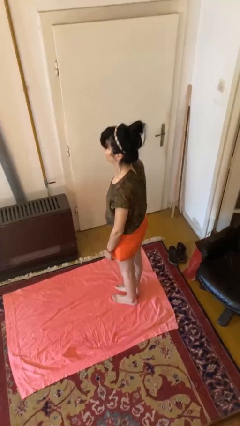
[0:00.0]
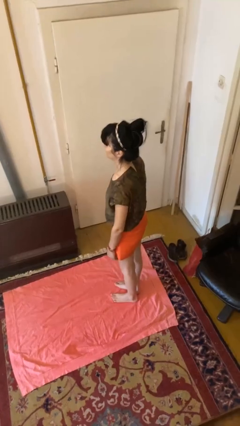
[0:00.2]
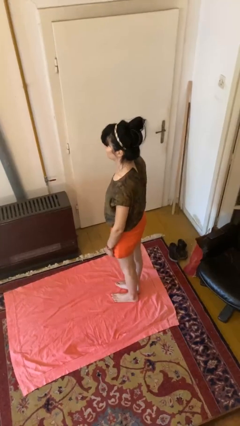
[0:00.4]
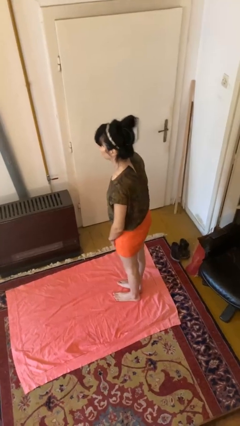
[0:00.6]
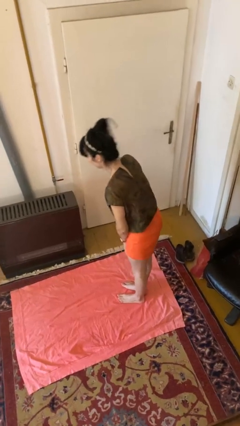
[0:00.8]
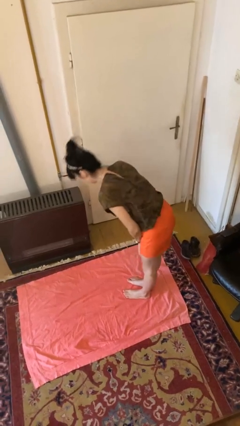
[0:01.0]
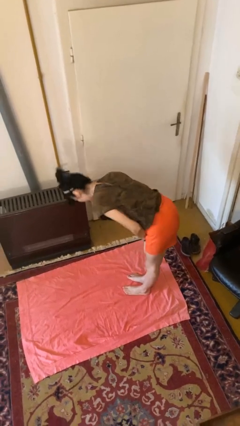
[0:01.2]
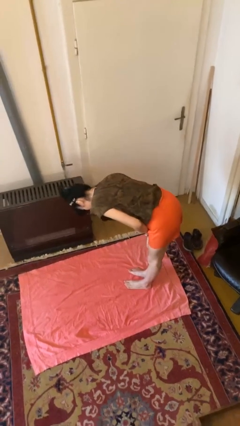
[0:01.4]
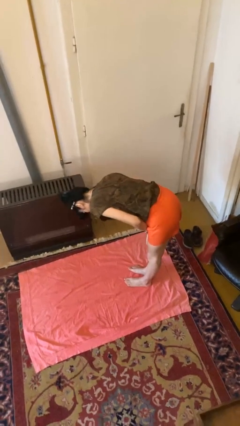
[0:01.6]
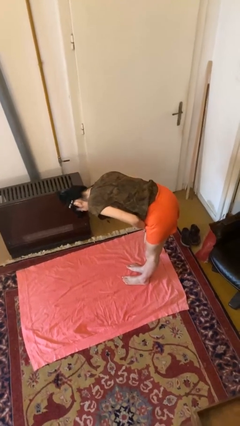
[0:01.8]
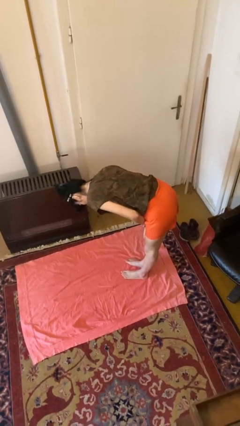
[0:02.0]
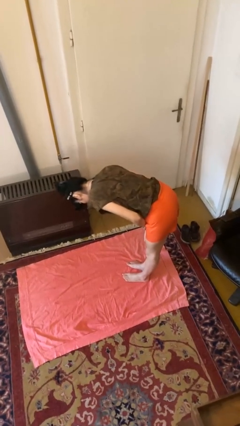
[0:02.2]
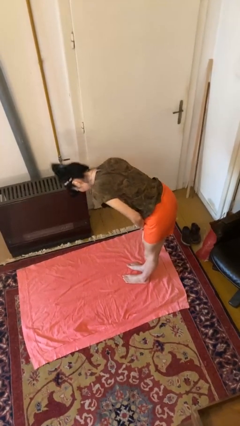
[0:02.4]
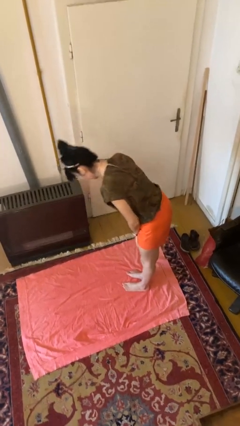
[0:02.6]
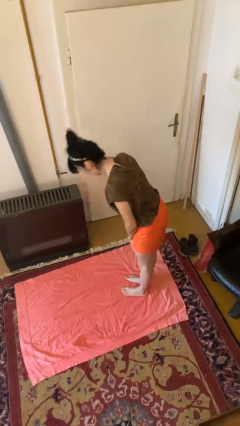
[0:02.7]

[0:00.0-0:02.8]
person bows

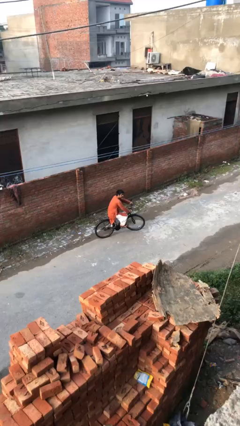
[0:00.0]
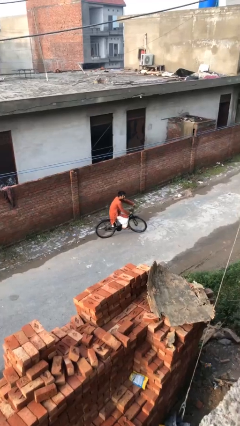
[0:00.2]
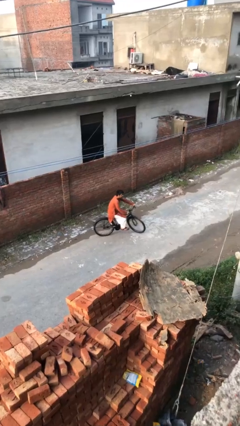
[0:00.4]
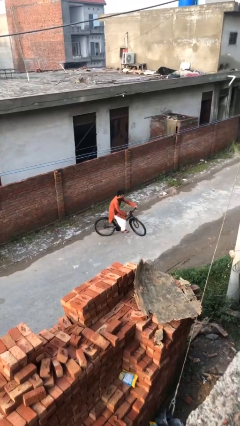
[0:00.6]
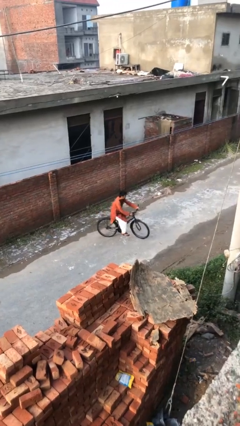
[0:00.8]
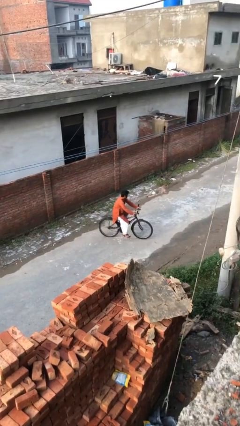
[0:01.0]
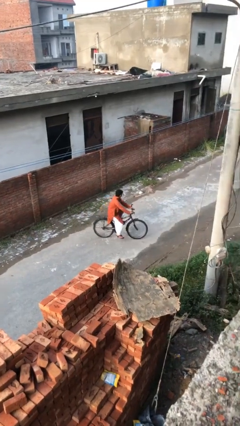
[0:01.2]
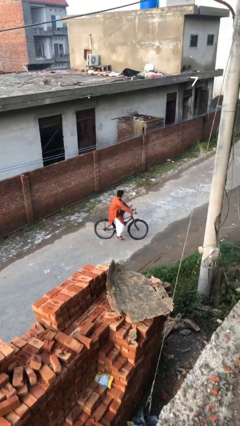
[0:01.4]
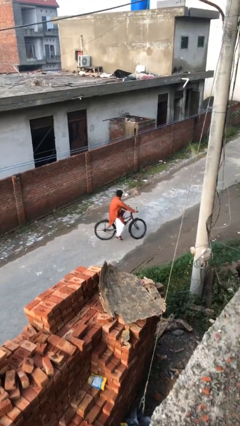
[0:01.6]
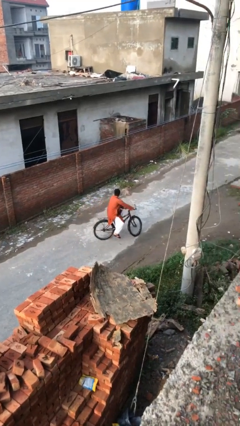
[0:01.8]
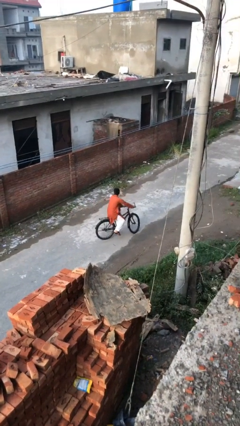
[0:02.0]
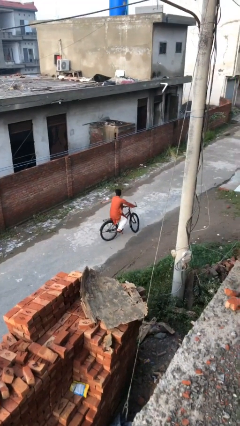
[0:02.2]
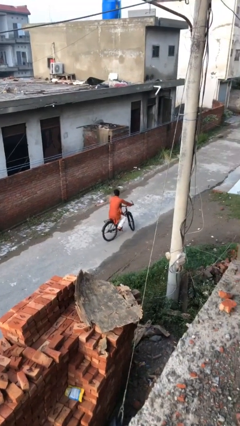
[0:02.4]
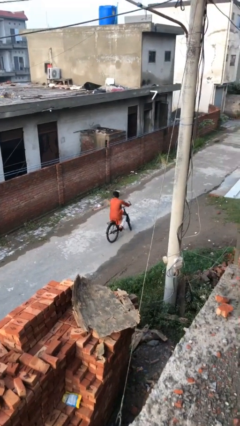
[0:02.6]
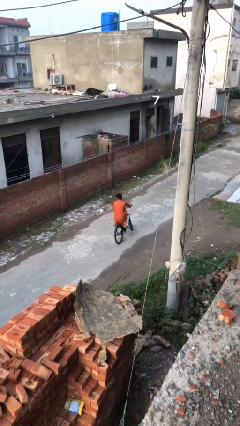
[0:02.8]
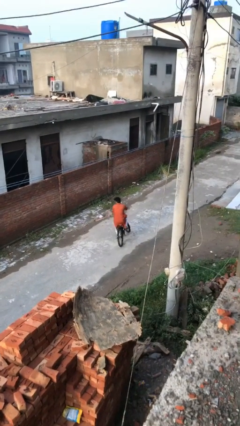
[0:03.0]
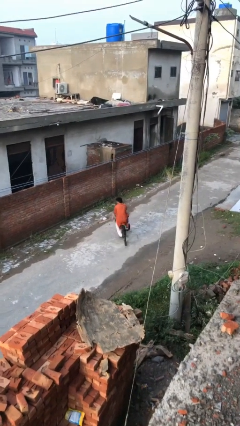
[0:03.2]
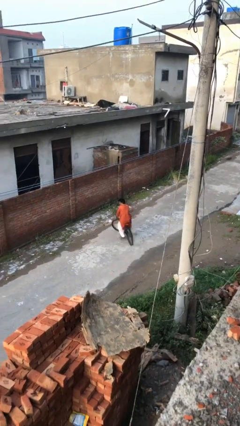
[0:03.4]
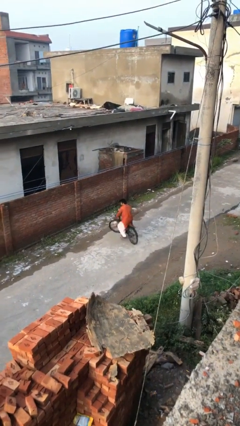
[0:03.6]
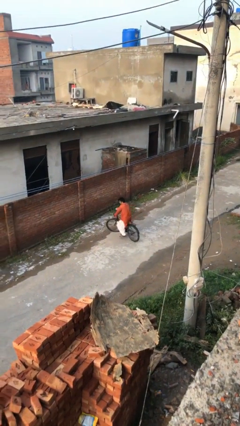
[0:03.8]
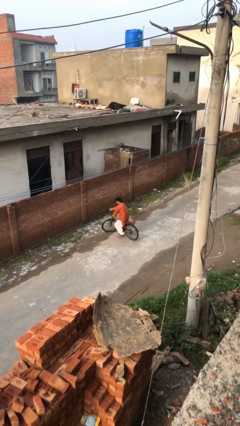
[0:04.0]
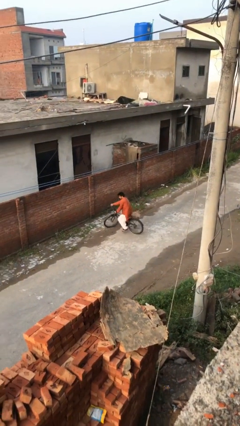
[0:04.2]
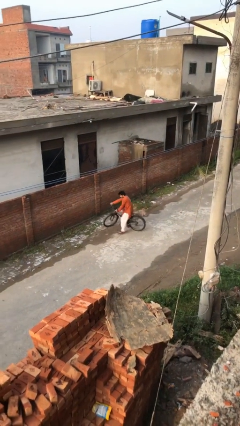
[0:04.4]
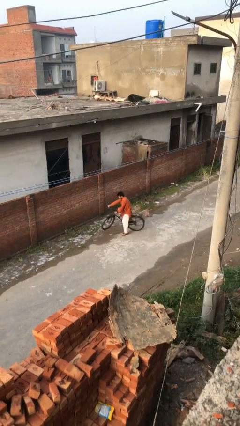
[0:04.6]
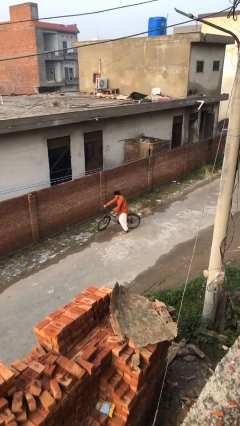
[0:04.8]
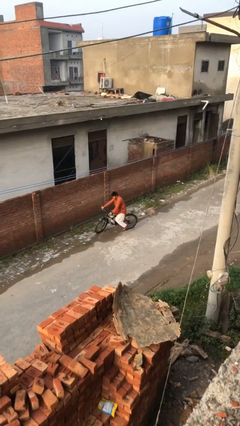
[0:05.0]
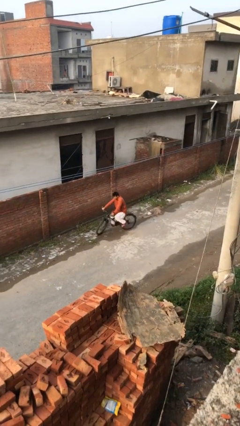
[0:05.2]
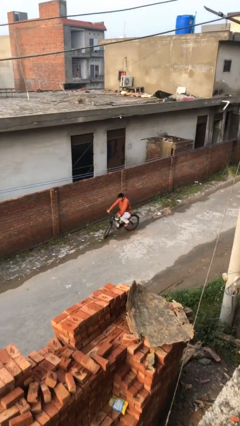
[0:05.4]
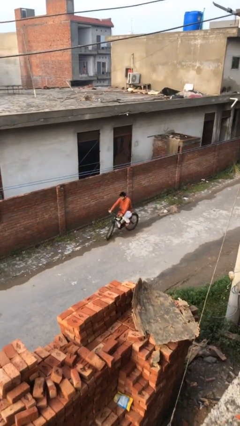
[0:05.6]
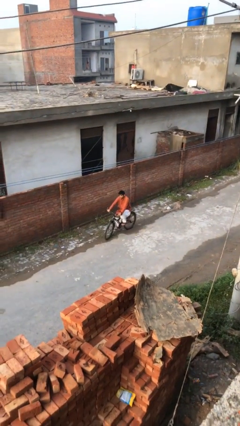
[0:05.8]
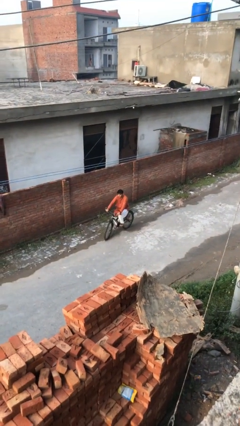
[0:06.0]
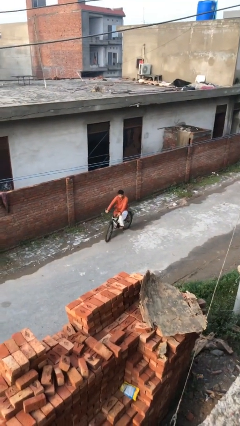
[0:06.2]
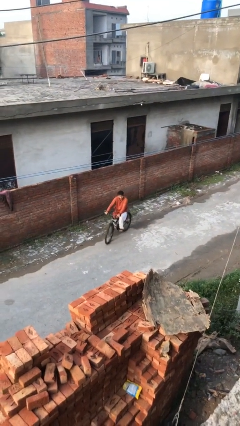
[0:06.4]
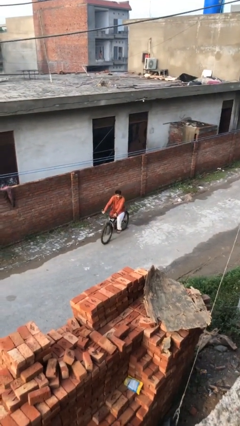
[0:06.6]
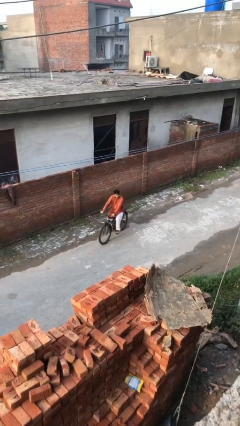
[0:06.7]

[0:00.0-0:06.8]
person rides bicycle

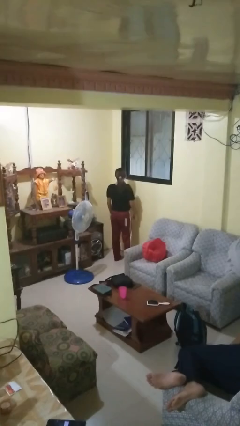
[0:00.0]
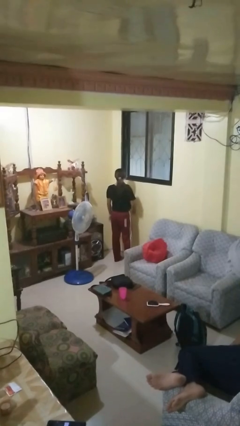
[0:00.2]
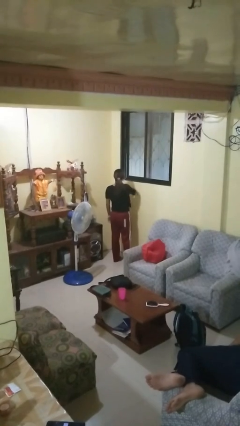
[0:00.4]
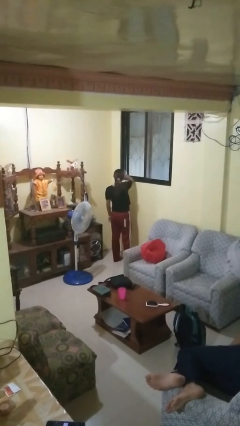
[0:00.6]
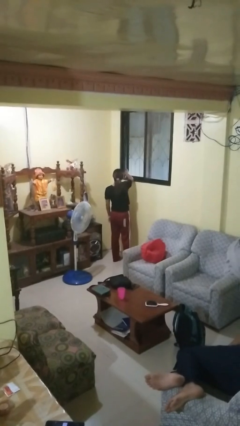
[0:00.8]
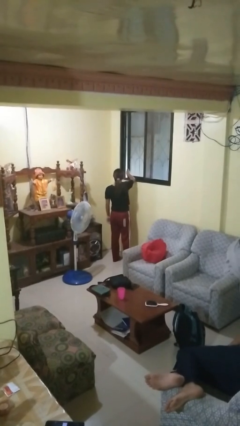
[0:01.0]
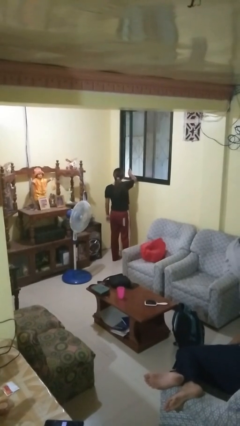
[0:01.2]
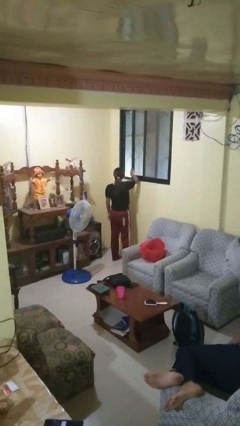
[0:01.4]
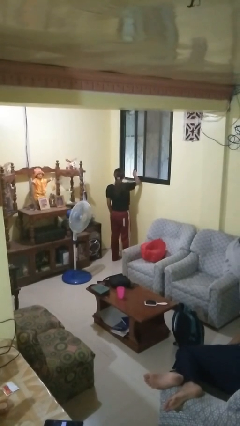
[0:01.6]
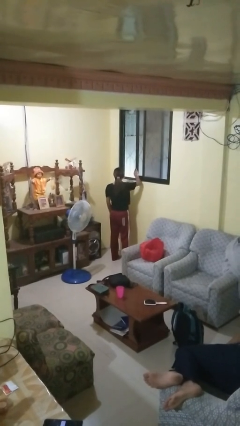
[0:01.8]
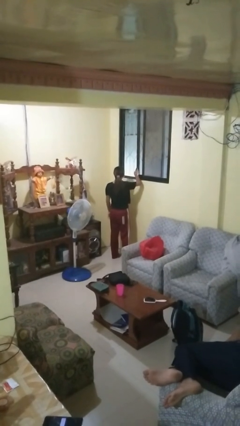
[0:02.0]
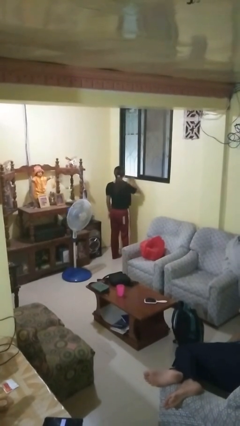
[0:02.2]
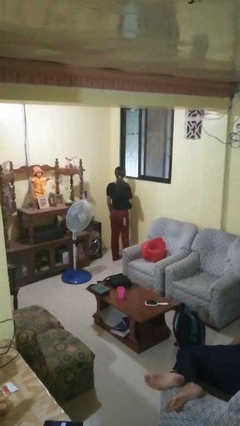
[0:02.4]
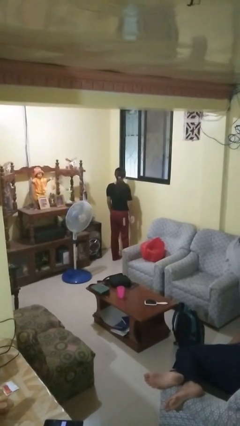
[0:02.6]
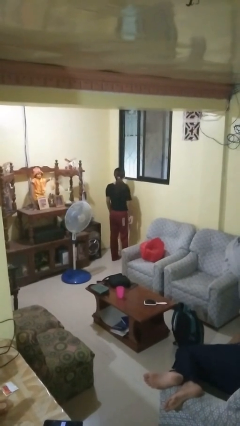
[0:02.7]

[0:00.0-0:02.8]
person opens home window

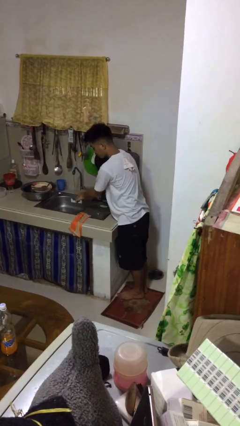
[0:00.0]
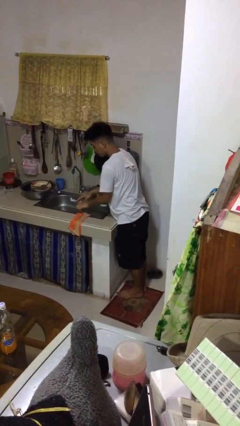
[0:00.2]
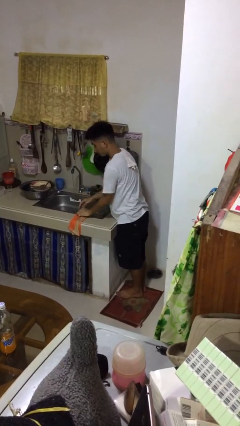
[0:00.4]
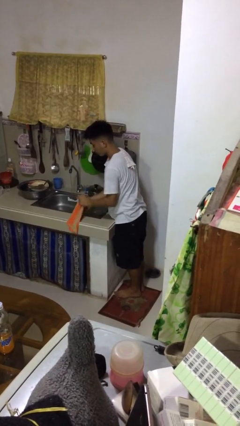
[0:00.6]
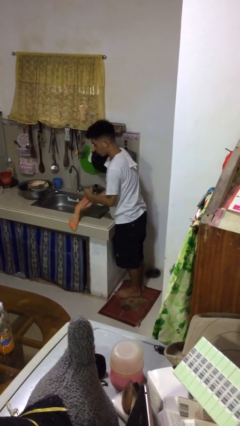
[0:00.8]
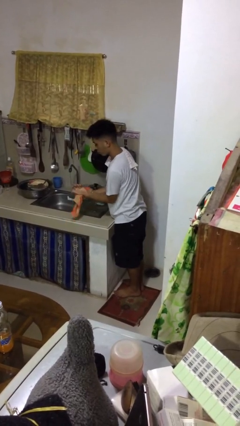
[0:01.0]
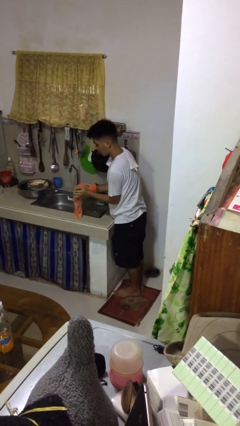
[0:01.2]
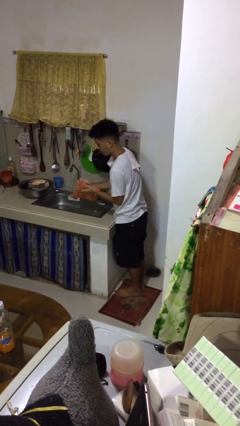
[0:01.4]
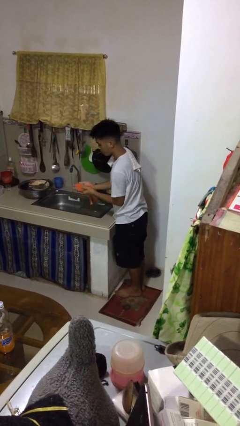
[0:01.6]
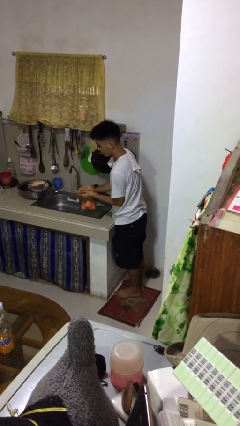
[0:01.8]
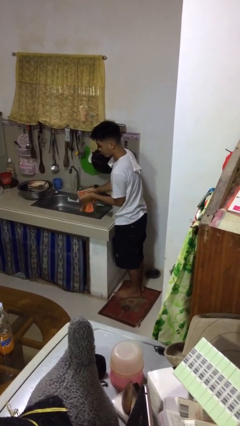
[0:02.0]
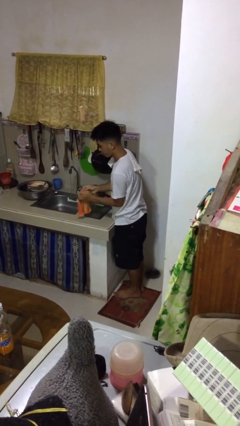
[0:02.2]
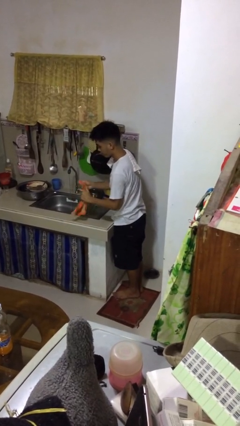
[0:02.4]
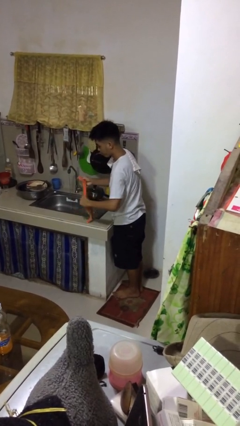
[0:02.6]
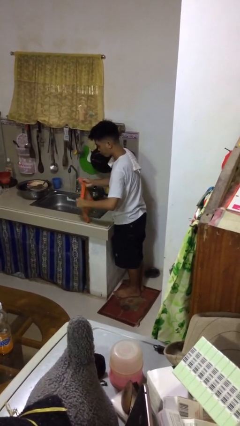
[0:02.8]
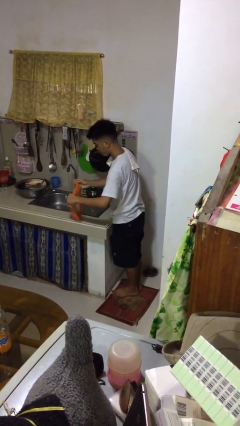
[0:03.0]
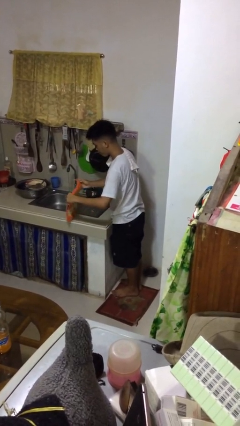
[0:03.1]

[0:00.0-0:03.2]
person dries hands with towel

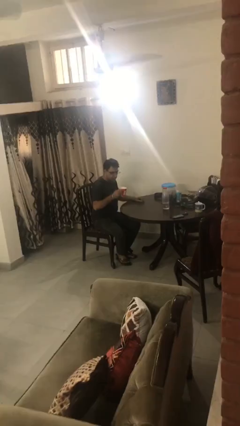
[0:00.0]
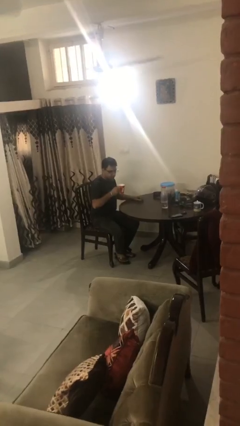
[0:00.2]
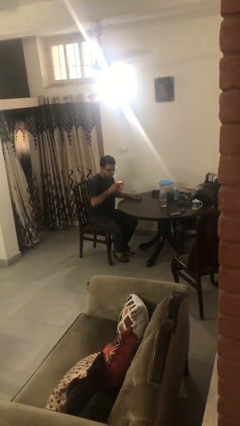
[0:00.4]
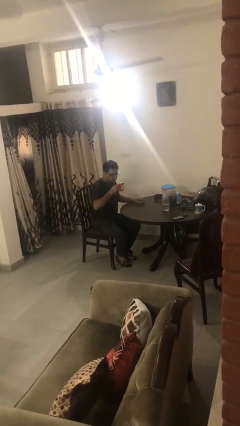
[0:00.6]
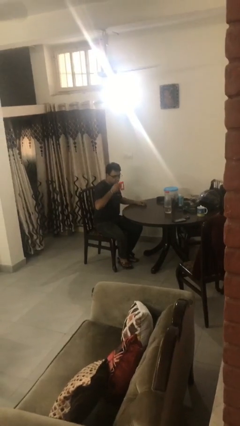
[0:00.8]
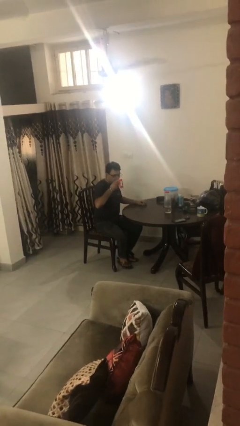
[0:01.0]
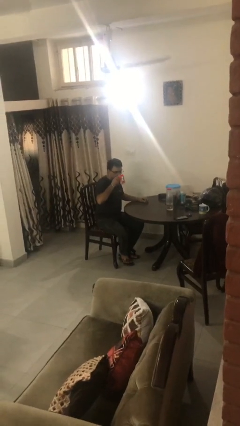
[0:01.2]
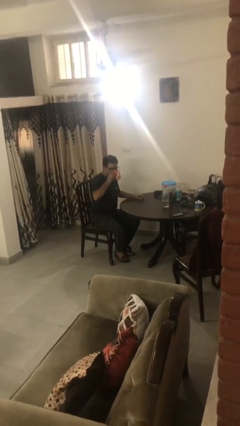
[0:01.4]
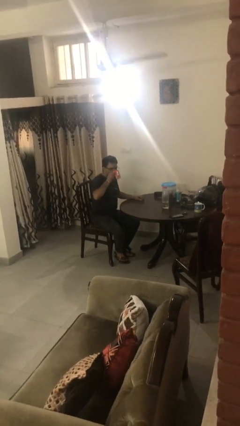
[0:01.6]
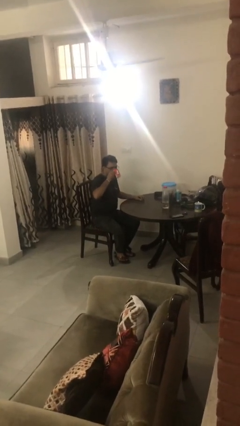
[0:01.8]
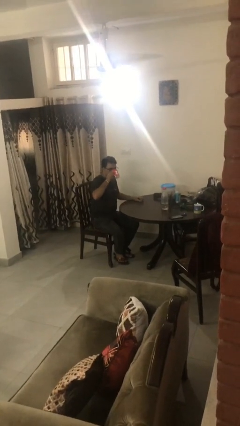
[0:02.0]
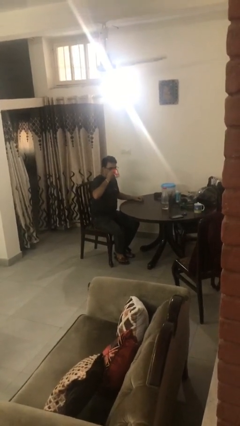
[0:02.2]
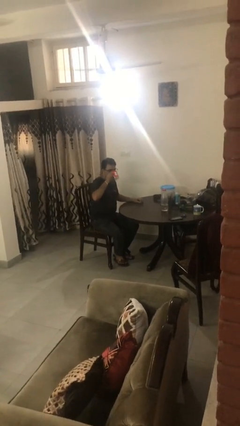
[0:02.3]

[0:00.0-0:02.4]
person drinks from mug
